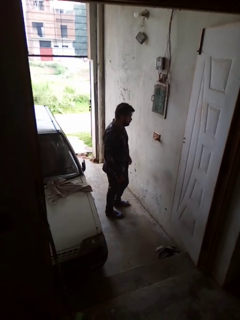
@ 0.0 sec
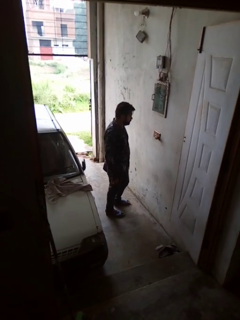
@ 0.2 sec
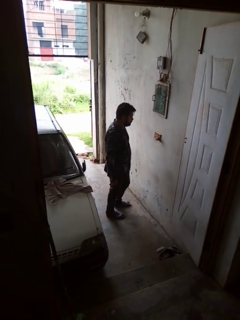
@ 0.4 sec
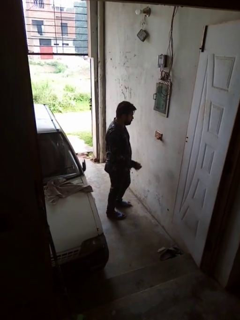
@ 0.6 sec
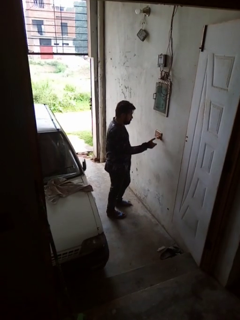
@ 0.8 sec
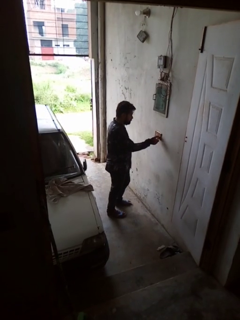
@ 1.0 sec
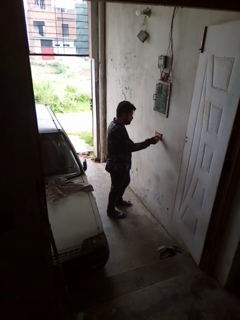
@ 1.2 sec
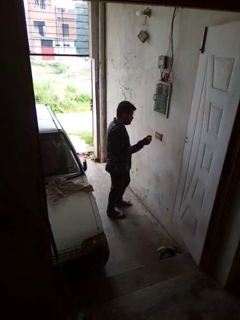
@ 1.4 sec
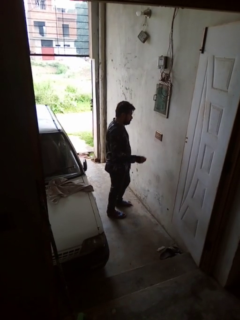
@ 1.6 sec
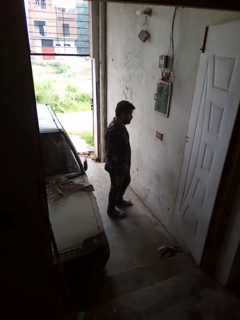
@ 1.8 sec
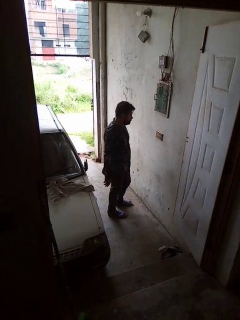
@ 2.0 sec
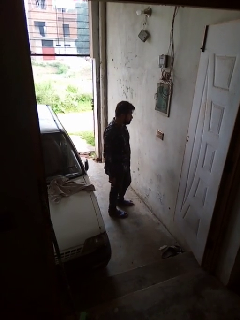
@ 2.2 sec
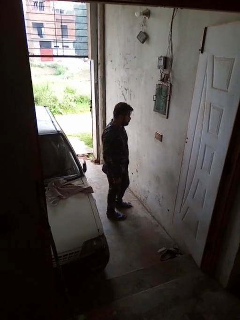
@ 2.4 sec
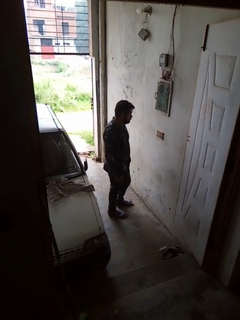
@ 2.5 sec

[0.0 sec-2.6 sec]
person unplugs from electrical socket

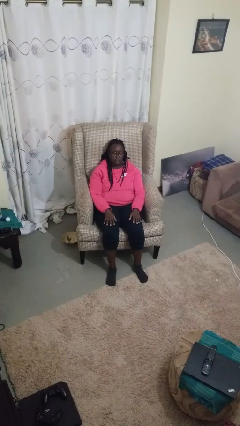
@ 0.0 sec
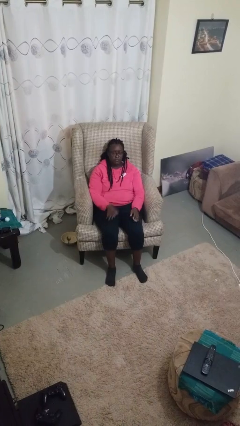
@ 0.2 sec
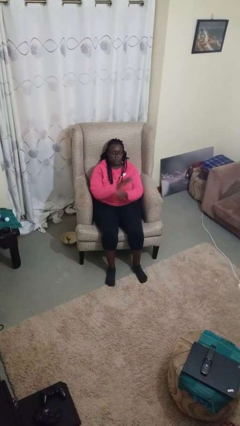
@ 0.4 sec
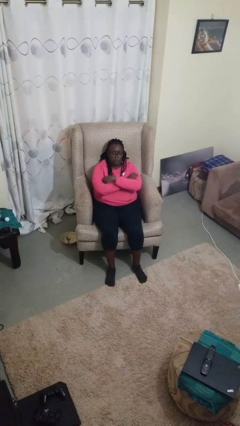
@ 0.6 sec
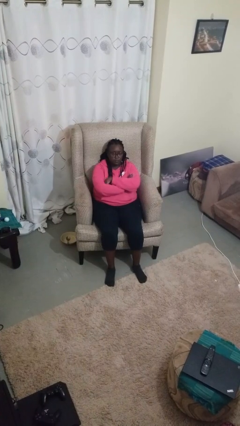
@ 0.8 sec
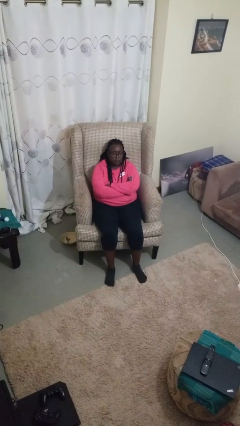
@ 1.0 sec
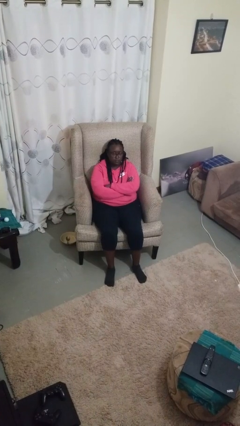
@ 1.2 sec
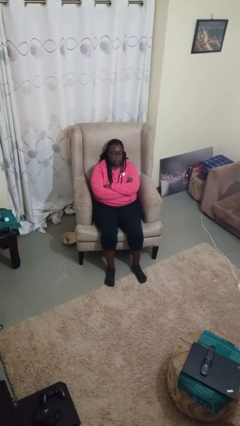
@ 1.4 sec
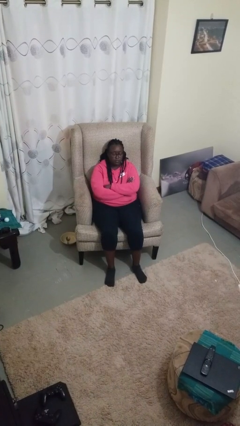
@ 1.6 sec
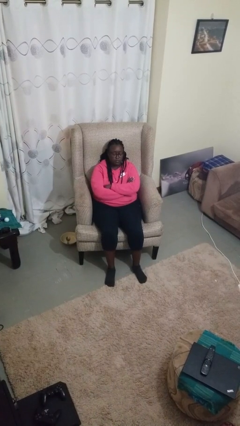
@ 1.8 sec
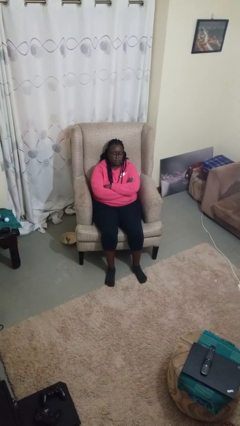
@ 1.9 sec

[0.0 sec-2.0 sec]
person crosses arms

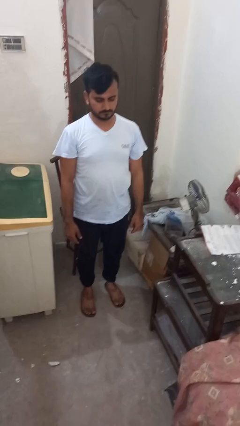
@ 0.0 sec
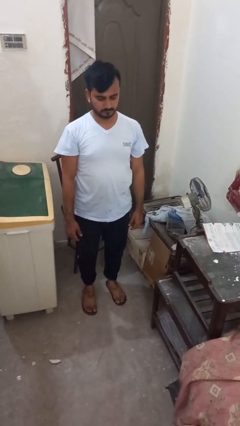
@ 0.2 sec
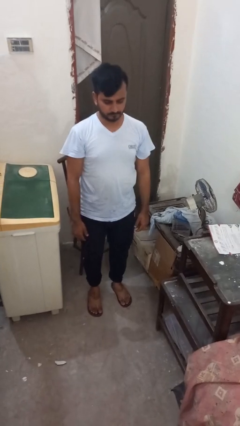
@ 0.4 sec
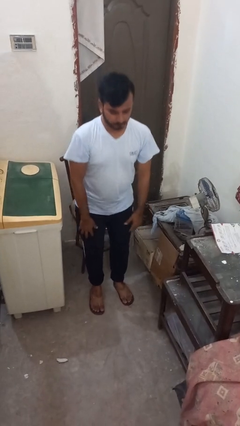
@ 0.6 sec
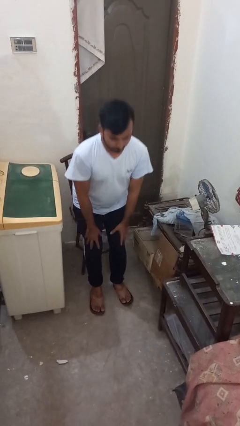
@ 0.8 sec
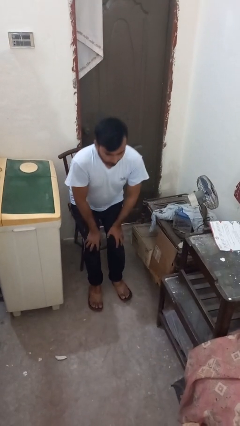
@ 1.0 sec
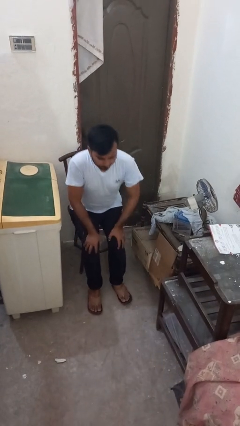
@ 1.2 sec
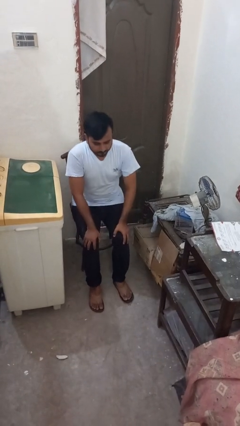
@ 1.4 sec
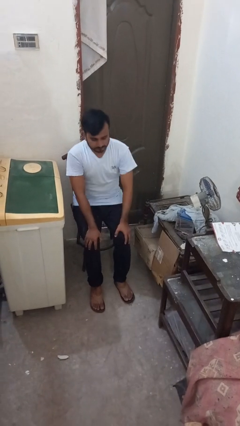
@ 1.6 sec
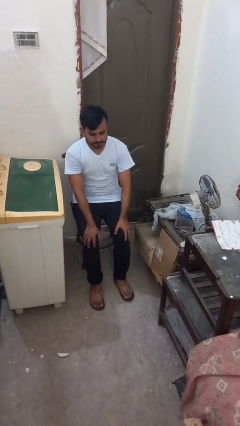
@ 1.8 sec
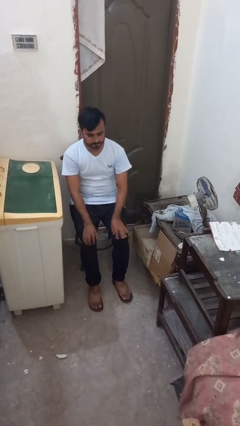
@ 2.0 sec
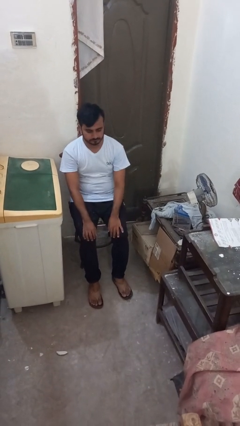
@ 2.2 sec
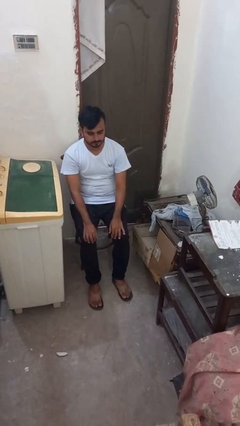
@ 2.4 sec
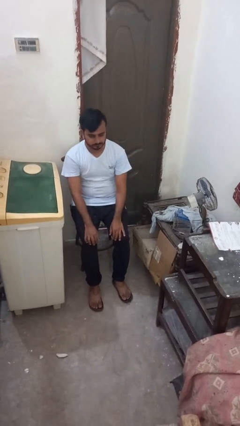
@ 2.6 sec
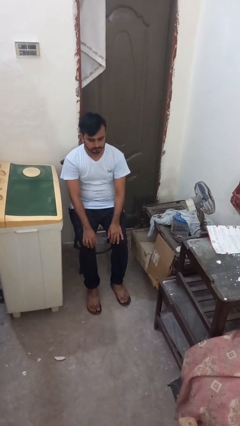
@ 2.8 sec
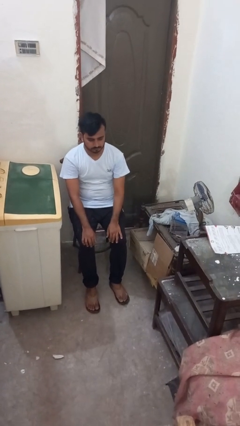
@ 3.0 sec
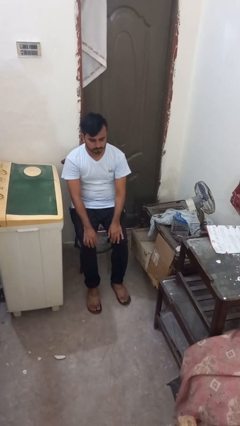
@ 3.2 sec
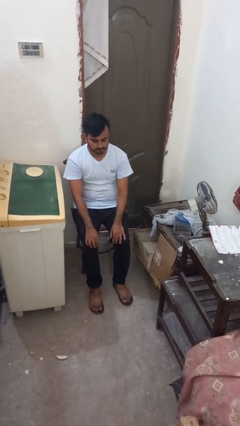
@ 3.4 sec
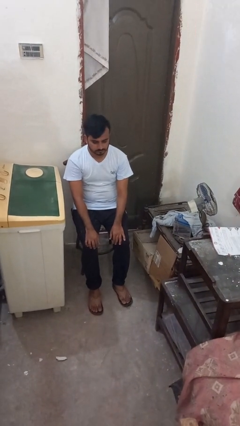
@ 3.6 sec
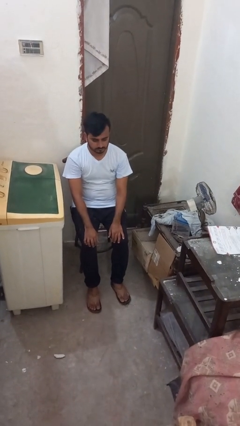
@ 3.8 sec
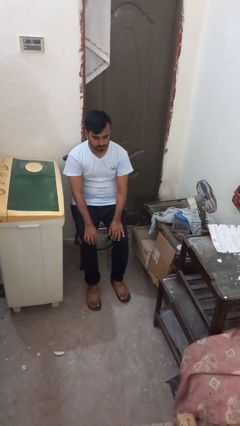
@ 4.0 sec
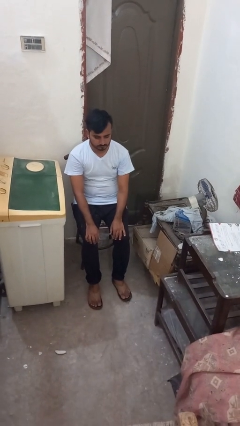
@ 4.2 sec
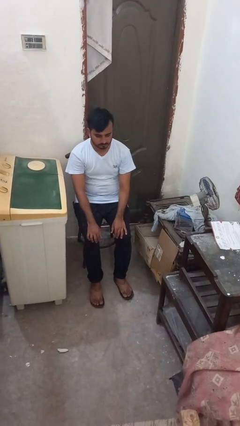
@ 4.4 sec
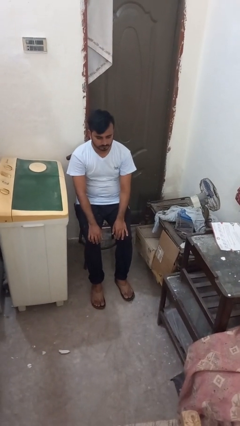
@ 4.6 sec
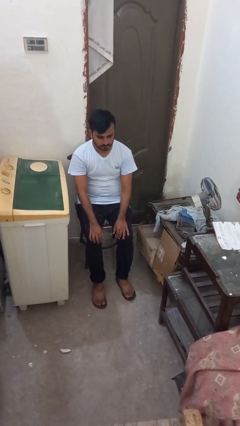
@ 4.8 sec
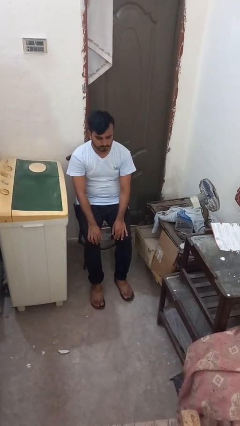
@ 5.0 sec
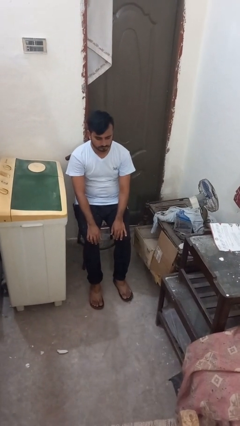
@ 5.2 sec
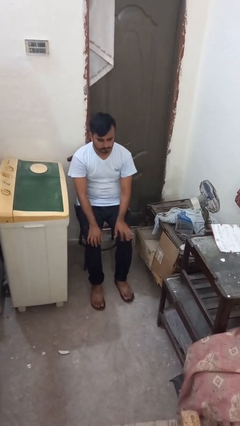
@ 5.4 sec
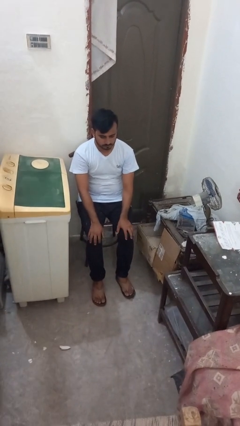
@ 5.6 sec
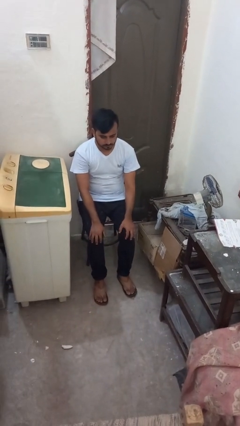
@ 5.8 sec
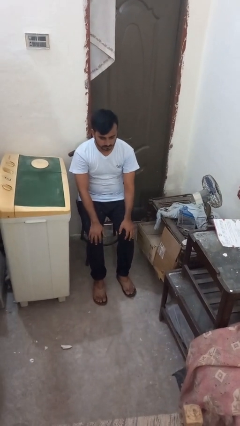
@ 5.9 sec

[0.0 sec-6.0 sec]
person sits down

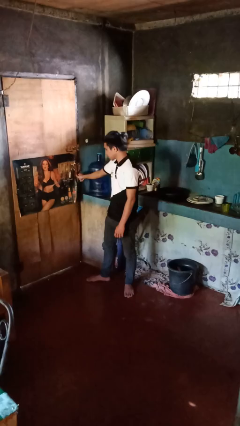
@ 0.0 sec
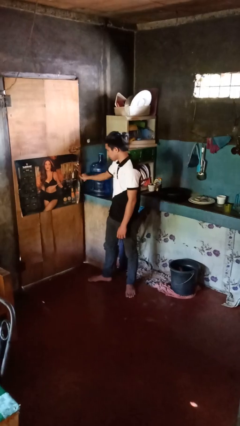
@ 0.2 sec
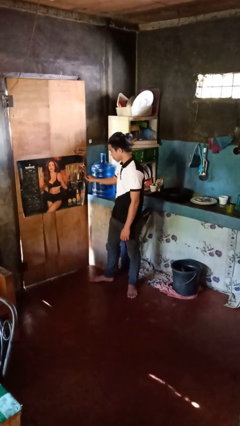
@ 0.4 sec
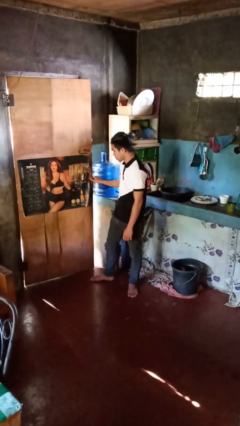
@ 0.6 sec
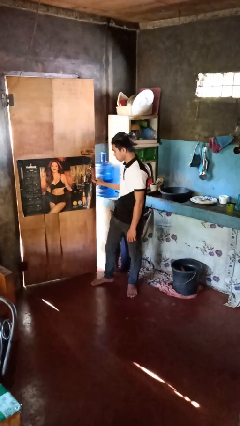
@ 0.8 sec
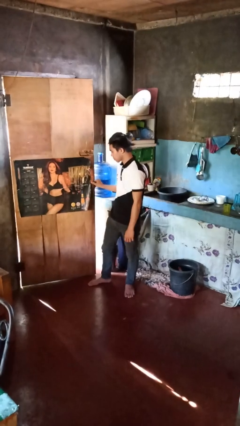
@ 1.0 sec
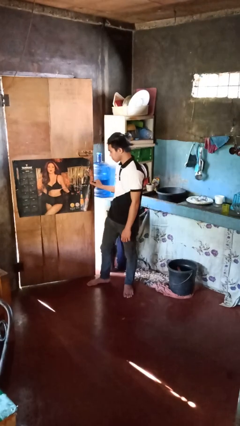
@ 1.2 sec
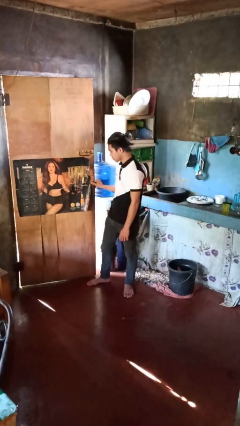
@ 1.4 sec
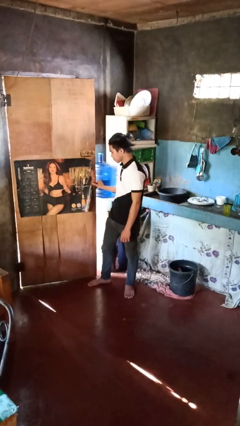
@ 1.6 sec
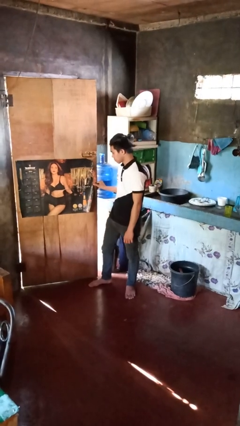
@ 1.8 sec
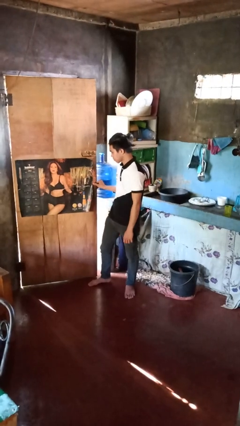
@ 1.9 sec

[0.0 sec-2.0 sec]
person opens facility door

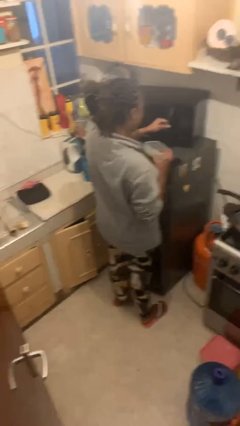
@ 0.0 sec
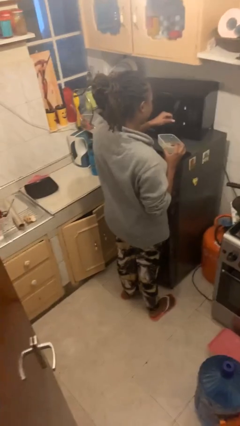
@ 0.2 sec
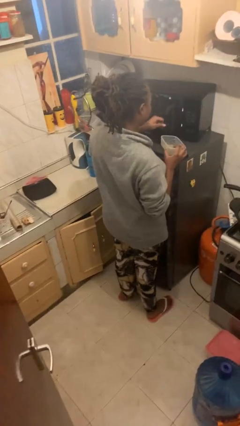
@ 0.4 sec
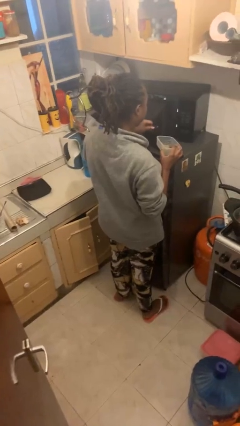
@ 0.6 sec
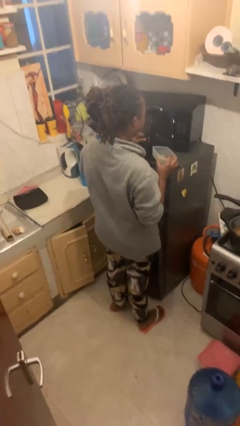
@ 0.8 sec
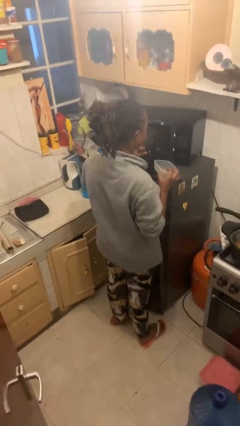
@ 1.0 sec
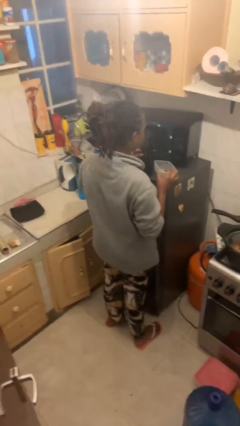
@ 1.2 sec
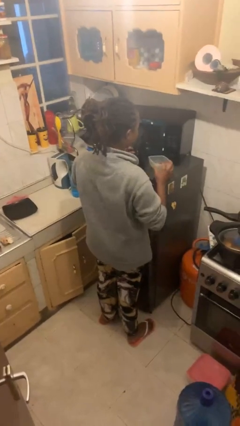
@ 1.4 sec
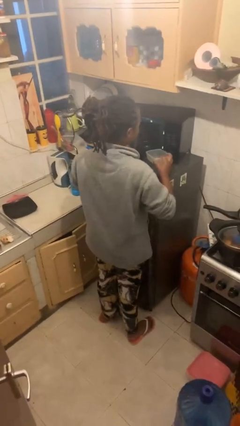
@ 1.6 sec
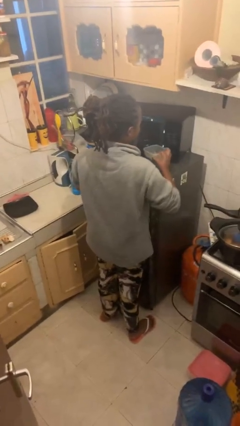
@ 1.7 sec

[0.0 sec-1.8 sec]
person opens microwave

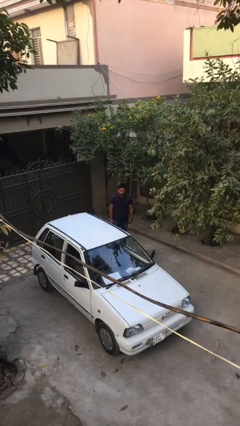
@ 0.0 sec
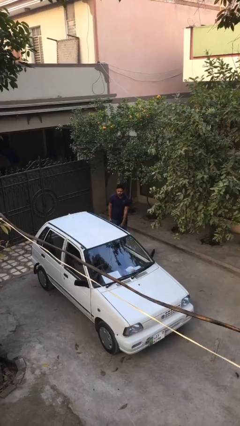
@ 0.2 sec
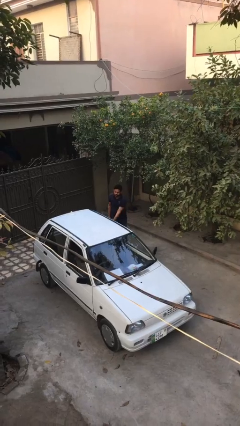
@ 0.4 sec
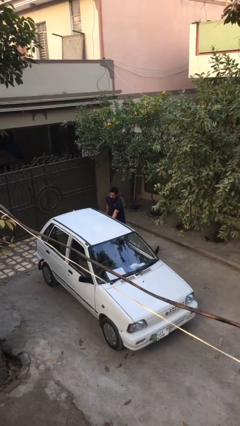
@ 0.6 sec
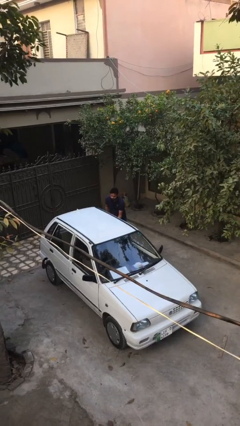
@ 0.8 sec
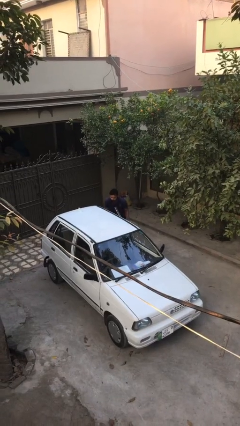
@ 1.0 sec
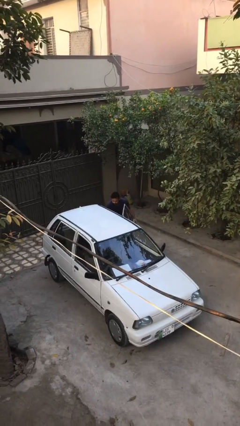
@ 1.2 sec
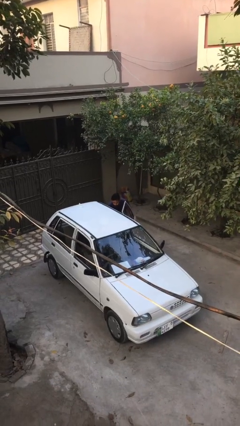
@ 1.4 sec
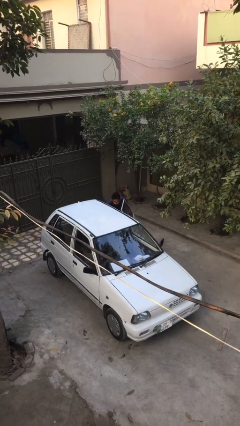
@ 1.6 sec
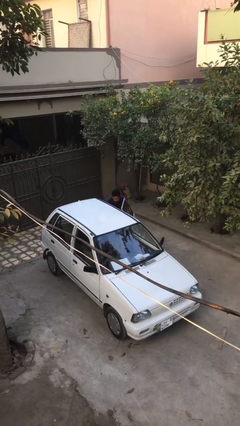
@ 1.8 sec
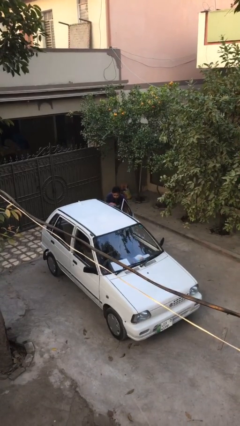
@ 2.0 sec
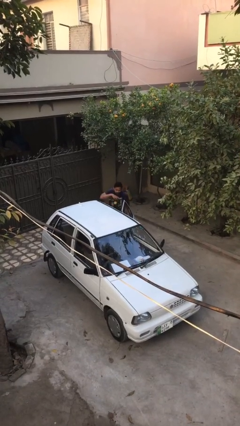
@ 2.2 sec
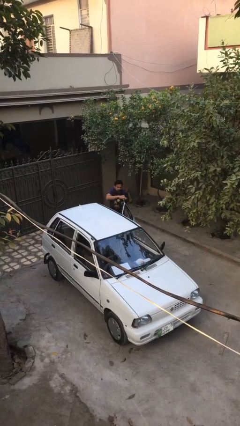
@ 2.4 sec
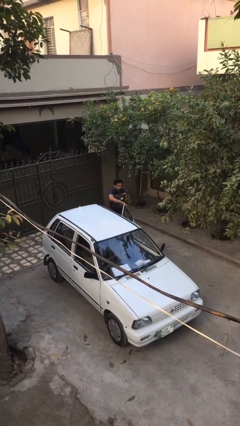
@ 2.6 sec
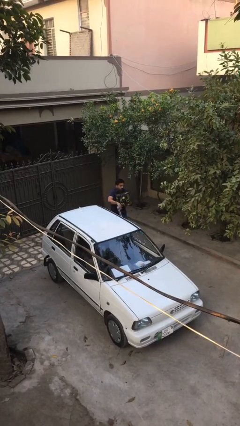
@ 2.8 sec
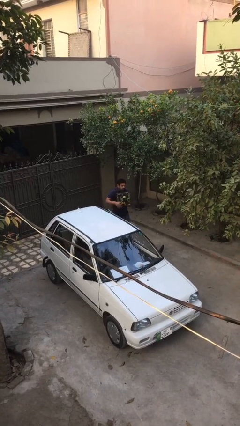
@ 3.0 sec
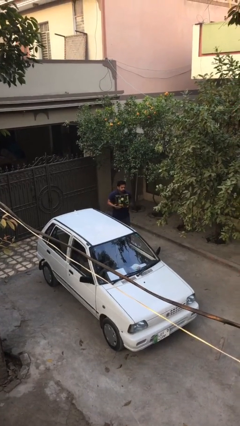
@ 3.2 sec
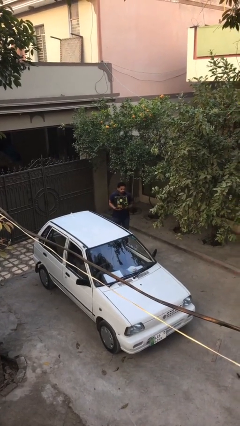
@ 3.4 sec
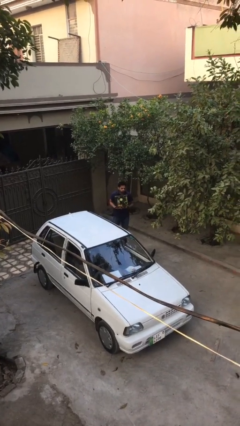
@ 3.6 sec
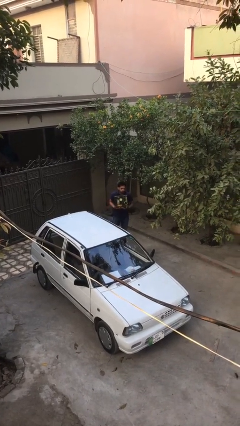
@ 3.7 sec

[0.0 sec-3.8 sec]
person unloads car
